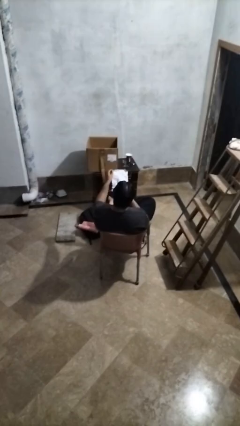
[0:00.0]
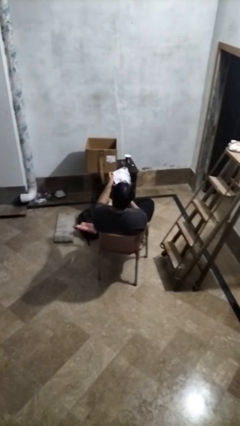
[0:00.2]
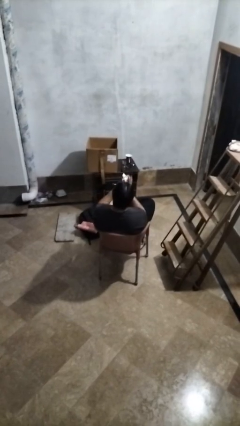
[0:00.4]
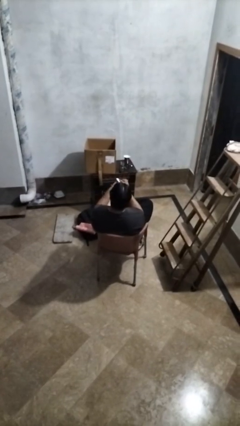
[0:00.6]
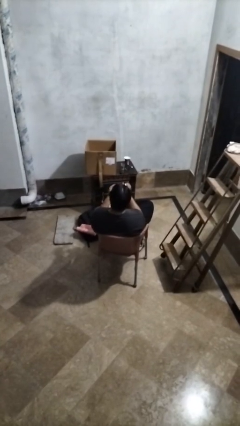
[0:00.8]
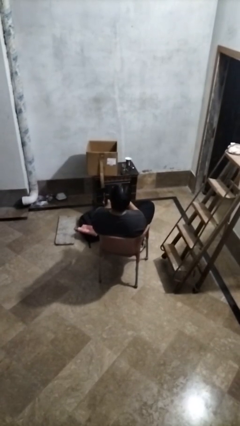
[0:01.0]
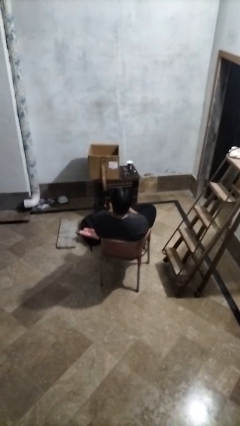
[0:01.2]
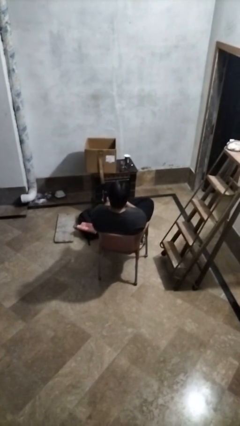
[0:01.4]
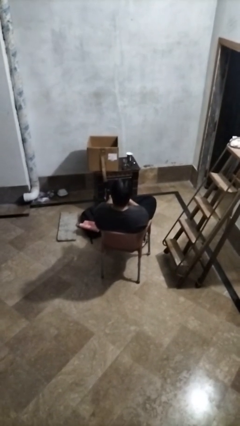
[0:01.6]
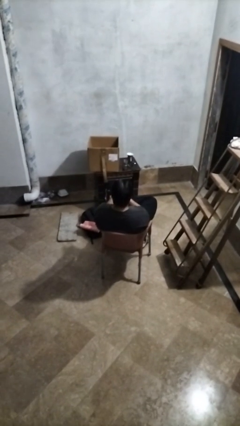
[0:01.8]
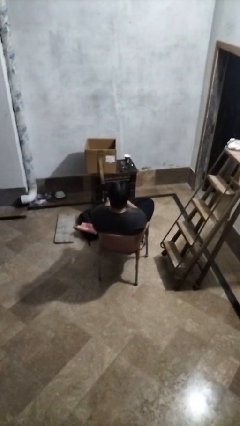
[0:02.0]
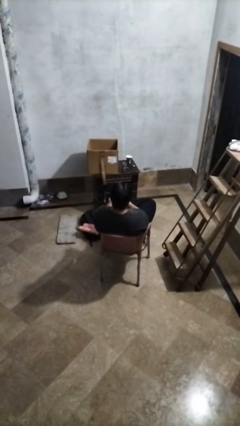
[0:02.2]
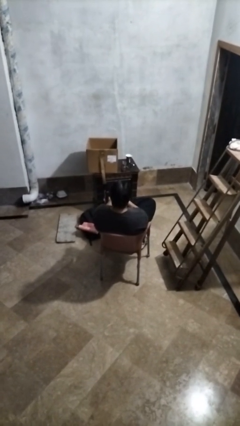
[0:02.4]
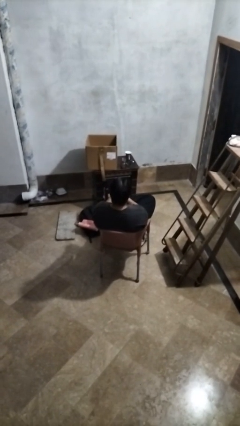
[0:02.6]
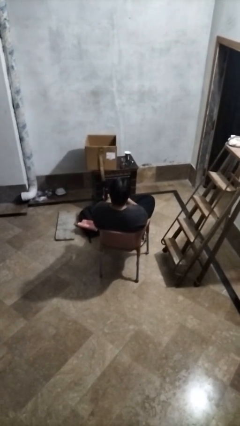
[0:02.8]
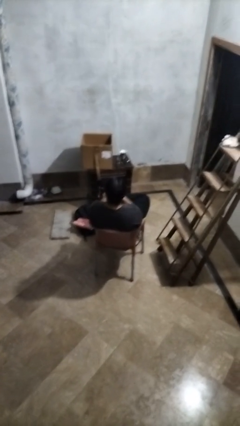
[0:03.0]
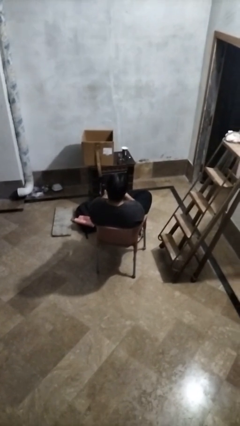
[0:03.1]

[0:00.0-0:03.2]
person crumples paper

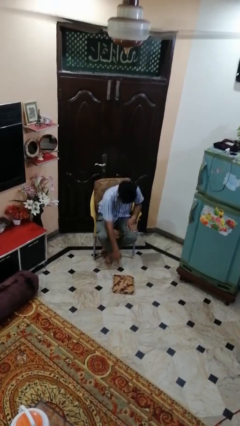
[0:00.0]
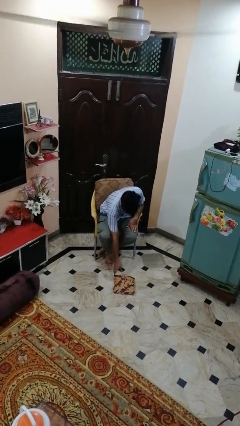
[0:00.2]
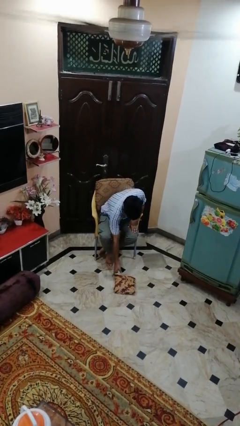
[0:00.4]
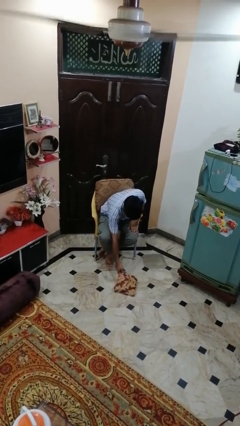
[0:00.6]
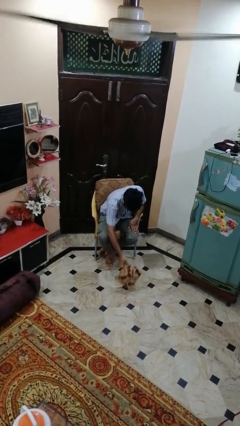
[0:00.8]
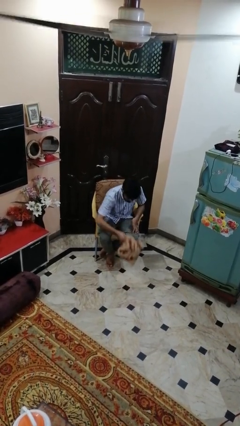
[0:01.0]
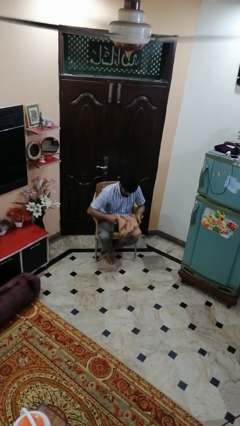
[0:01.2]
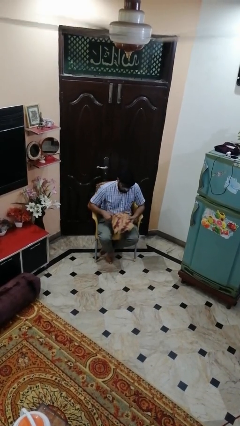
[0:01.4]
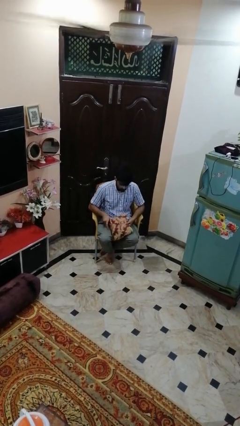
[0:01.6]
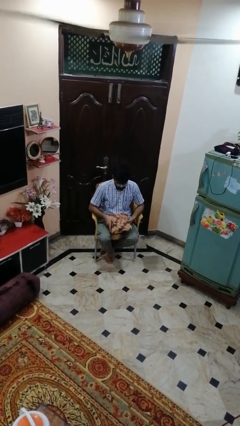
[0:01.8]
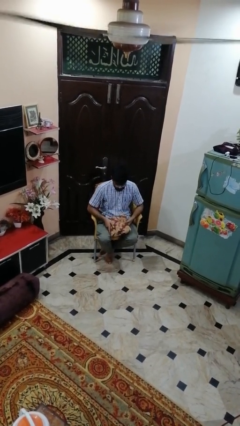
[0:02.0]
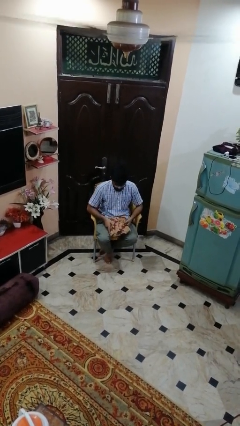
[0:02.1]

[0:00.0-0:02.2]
person picks up object from floor

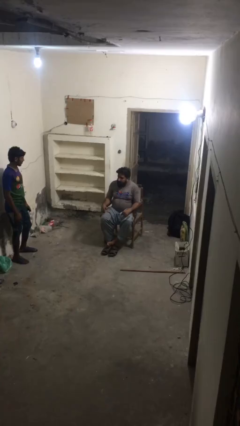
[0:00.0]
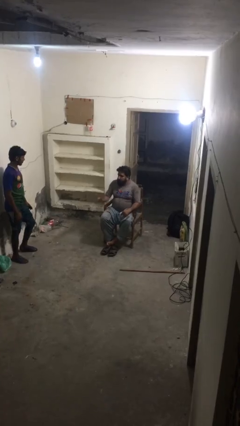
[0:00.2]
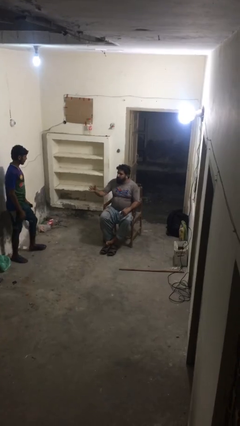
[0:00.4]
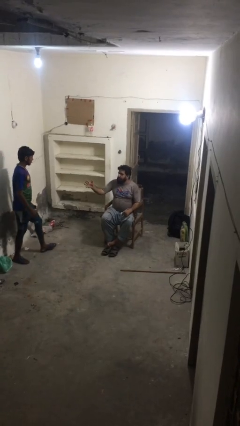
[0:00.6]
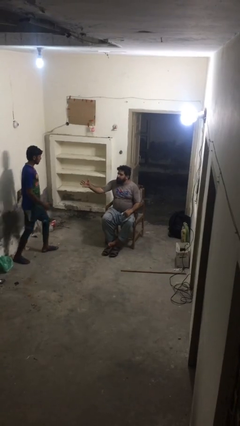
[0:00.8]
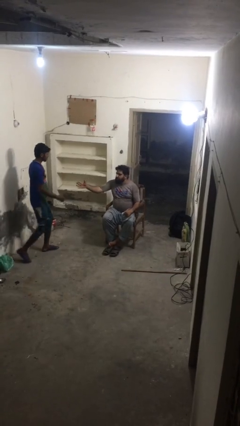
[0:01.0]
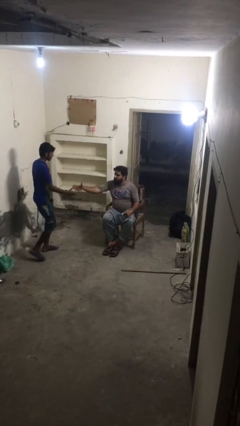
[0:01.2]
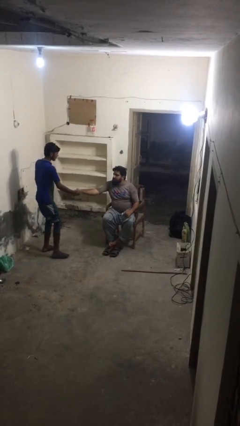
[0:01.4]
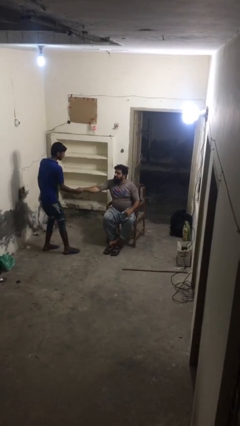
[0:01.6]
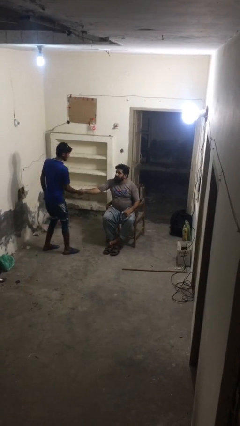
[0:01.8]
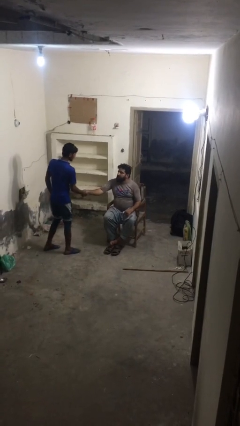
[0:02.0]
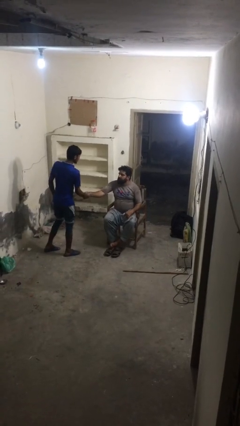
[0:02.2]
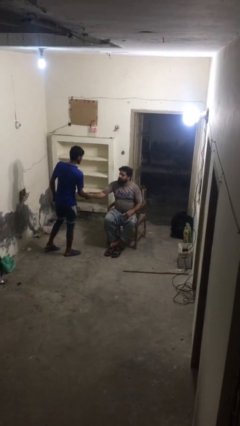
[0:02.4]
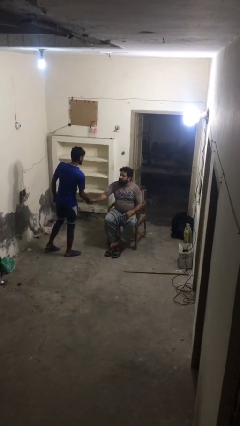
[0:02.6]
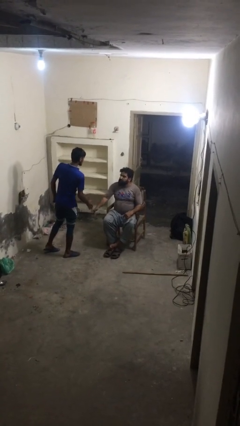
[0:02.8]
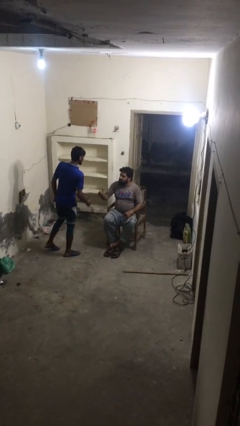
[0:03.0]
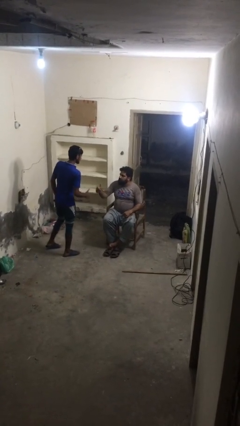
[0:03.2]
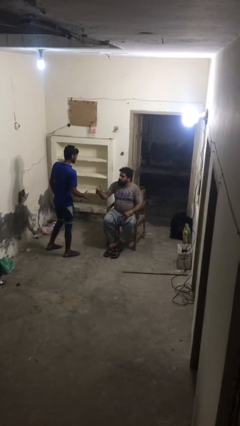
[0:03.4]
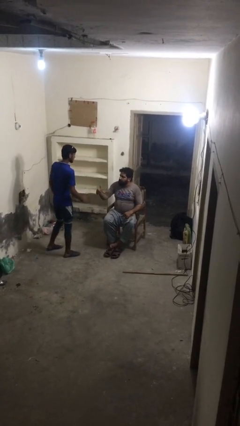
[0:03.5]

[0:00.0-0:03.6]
person shakes hand

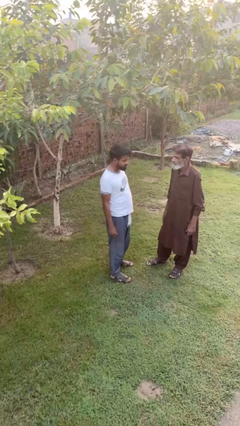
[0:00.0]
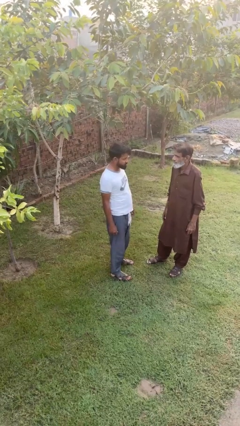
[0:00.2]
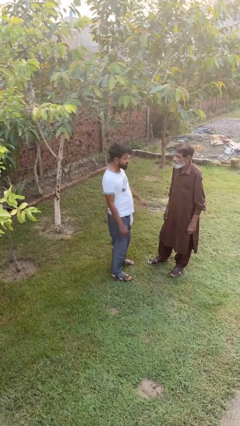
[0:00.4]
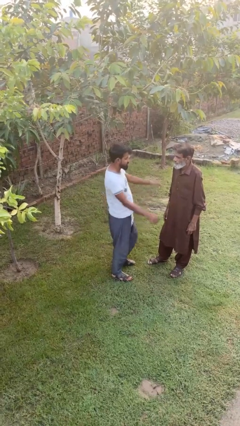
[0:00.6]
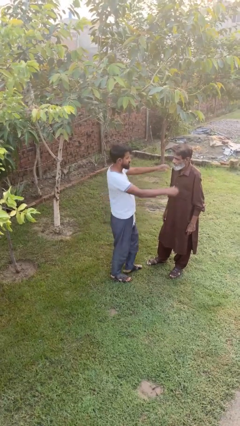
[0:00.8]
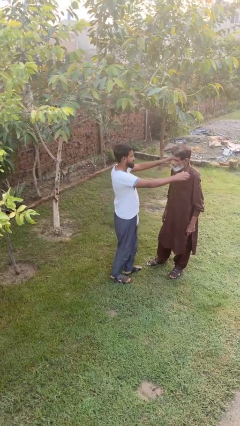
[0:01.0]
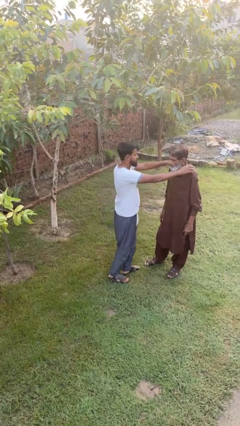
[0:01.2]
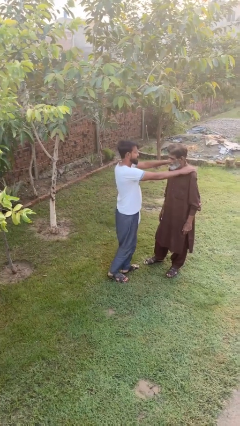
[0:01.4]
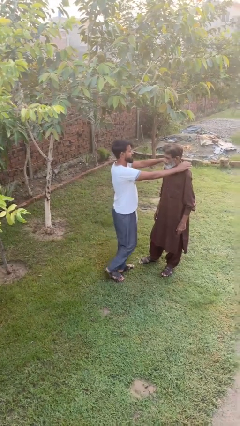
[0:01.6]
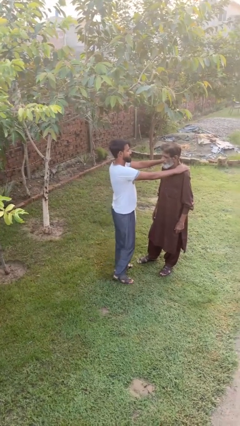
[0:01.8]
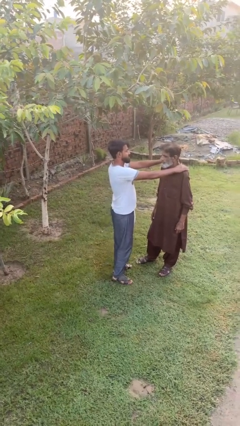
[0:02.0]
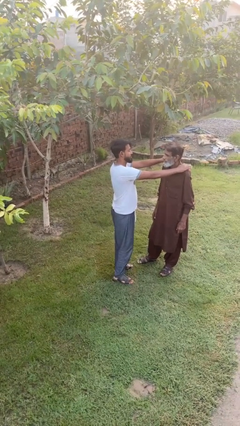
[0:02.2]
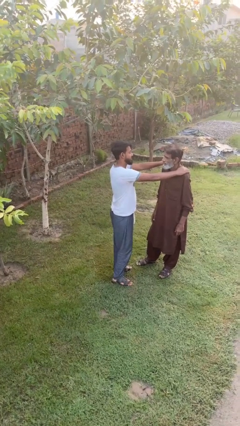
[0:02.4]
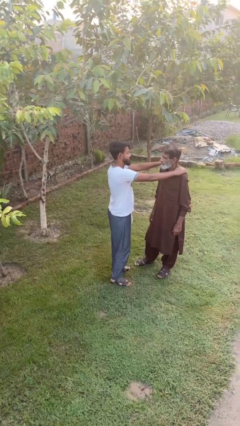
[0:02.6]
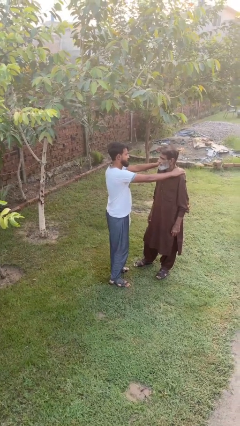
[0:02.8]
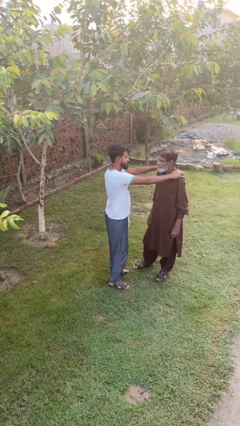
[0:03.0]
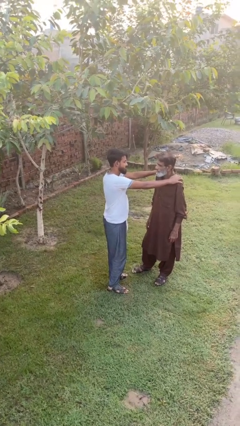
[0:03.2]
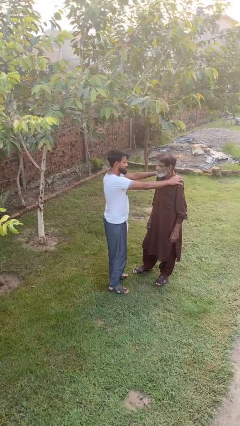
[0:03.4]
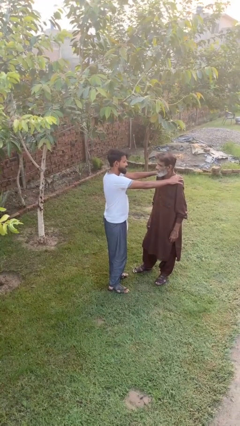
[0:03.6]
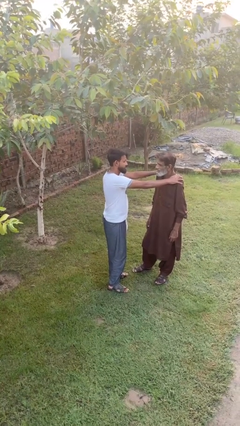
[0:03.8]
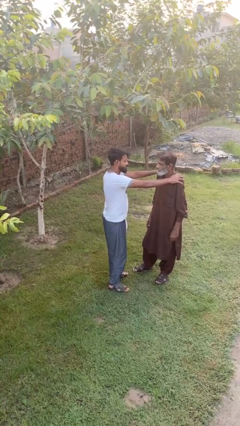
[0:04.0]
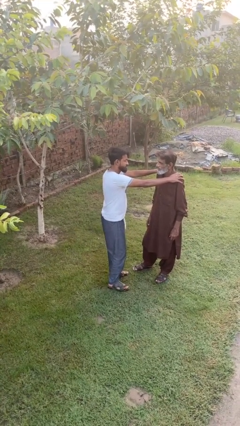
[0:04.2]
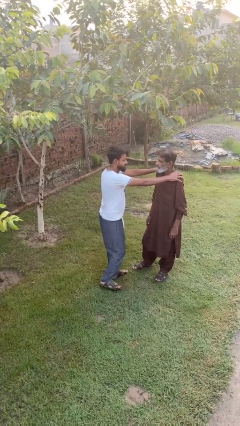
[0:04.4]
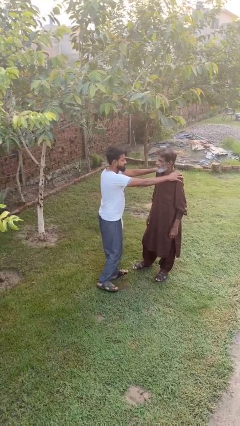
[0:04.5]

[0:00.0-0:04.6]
person pounds shoulders of person

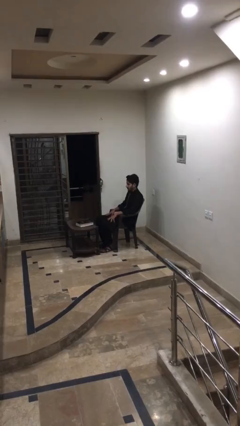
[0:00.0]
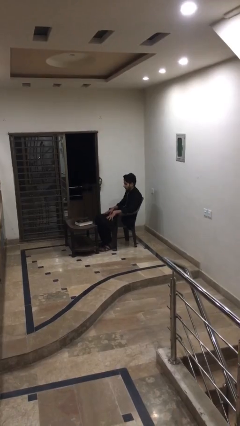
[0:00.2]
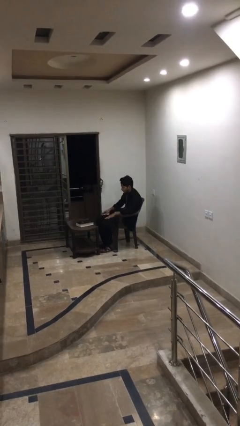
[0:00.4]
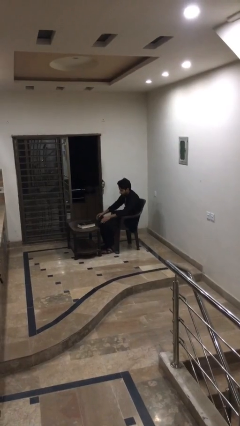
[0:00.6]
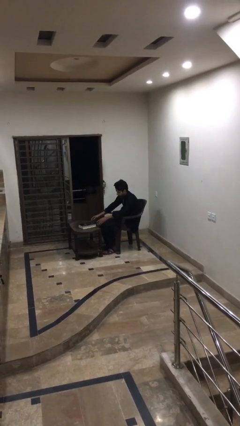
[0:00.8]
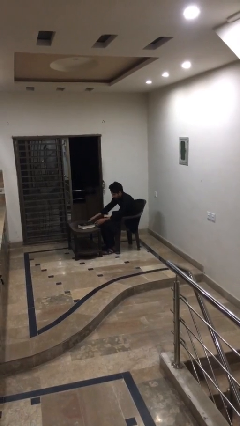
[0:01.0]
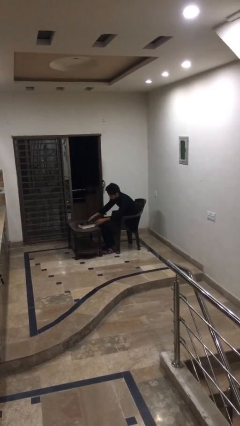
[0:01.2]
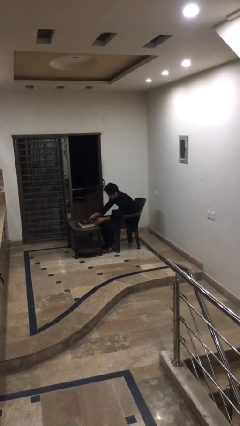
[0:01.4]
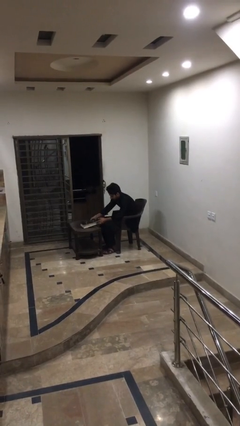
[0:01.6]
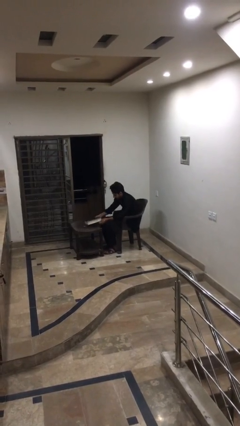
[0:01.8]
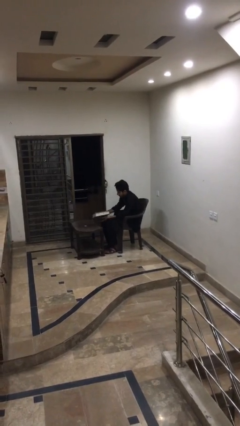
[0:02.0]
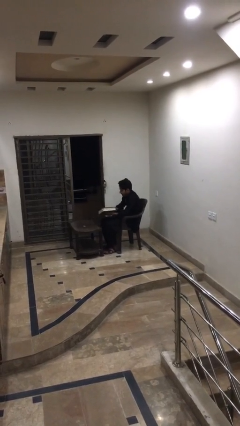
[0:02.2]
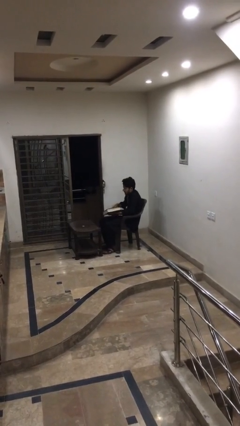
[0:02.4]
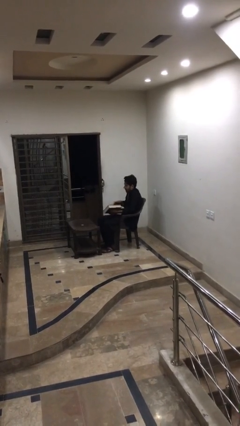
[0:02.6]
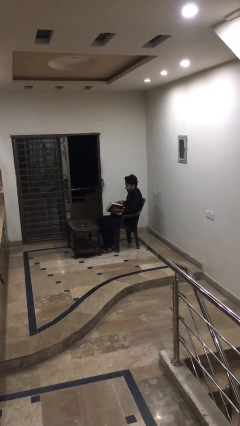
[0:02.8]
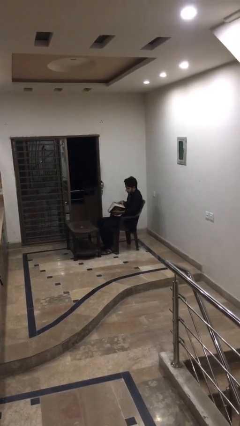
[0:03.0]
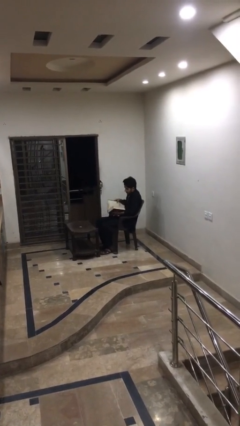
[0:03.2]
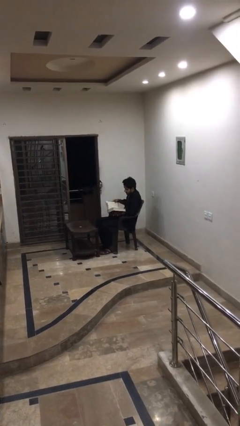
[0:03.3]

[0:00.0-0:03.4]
person picks up object from table

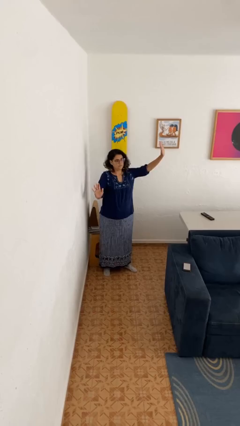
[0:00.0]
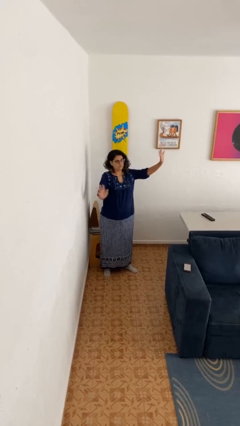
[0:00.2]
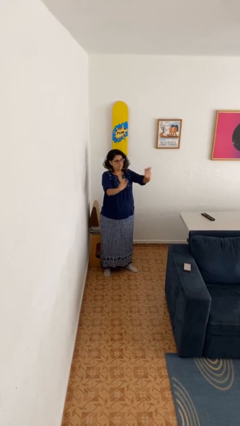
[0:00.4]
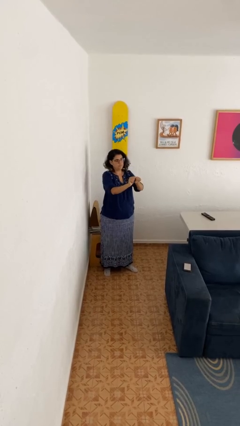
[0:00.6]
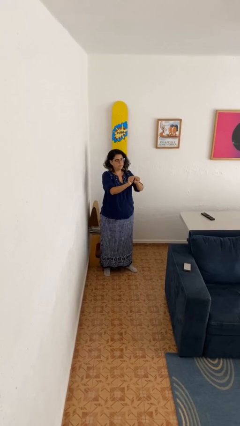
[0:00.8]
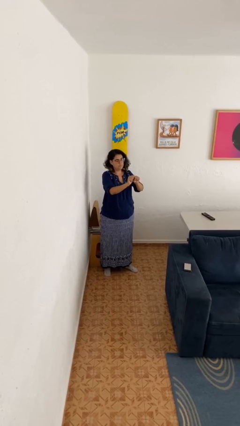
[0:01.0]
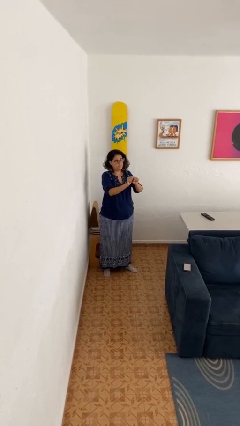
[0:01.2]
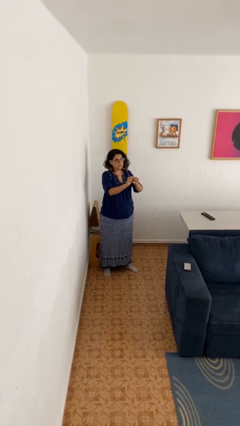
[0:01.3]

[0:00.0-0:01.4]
person gestures zoom out
